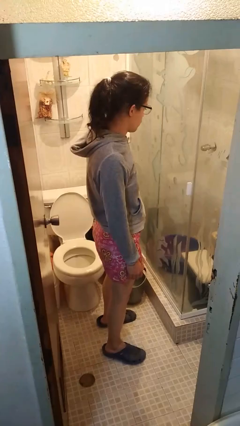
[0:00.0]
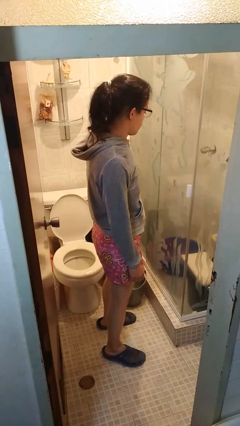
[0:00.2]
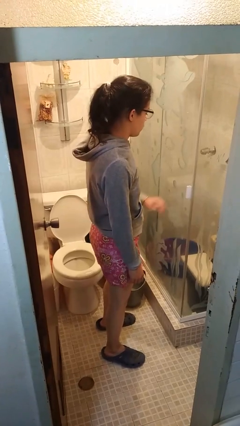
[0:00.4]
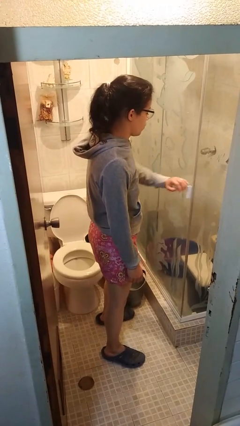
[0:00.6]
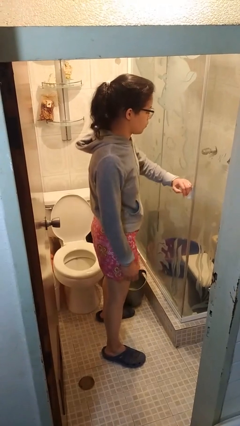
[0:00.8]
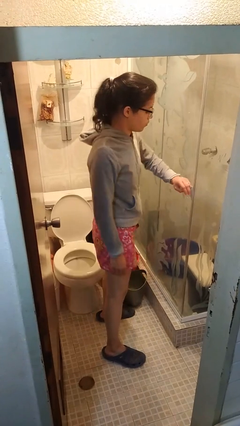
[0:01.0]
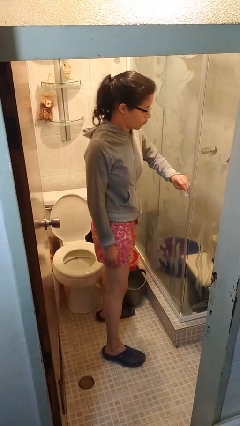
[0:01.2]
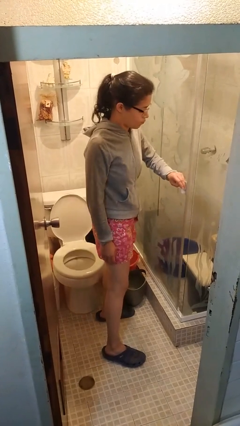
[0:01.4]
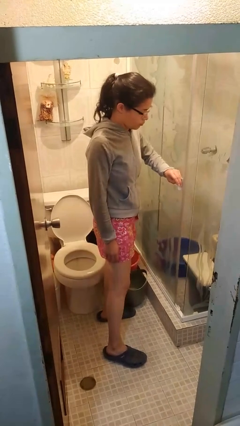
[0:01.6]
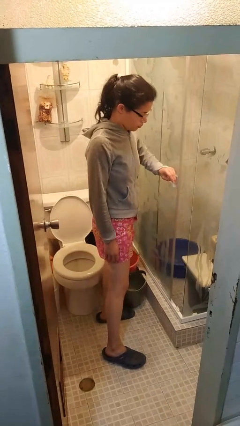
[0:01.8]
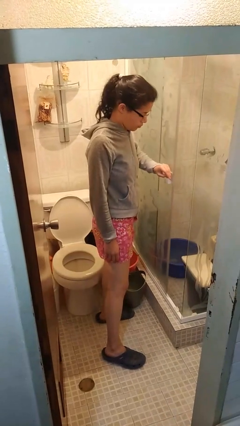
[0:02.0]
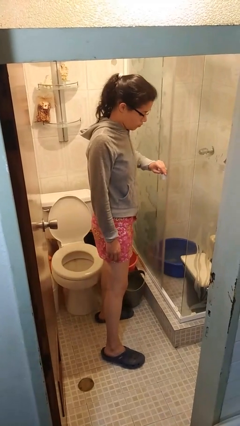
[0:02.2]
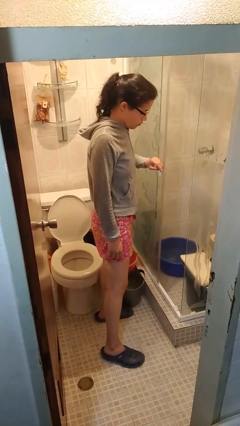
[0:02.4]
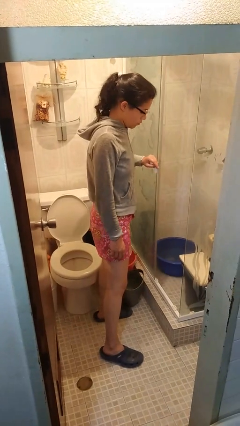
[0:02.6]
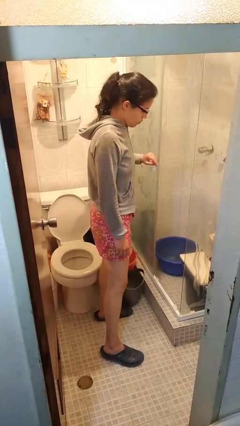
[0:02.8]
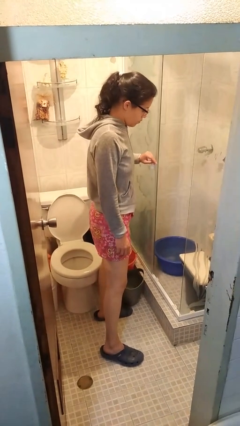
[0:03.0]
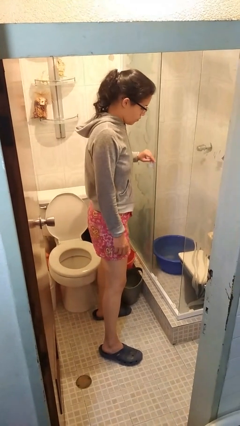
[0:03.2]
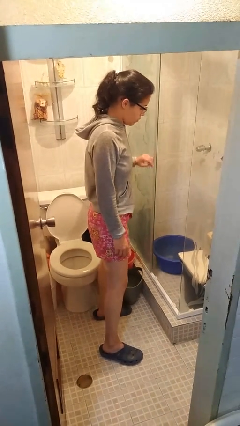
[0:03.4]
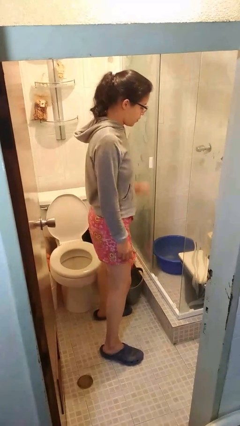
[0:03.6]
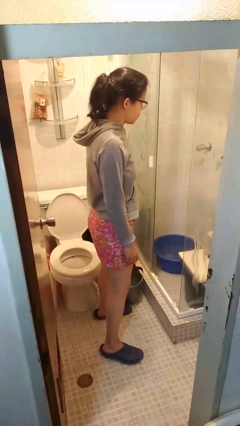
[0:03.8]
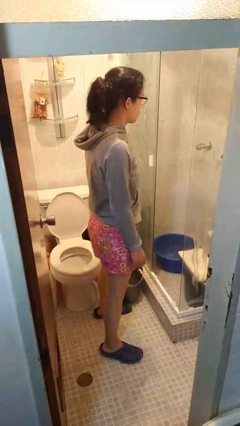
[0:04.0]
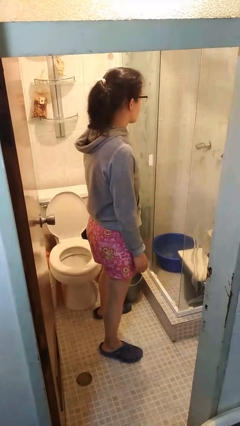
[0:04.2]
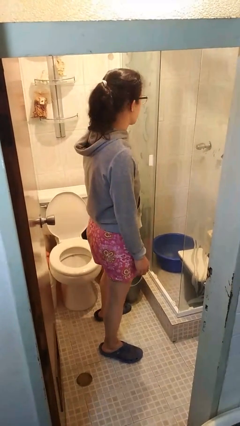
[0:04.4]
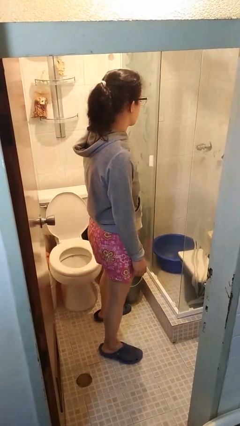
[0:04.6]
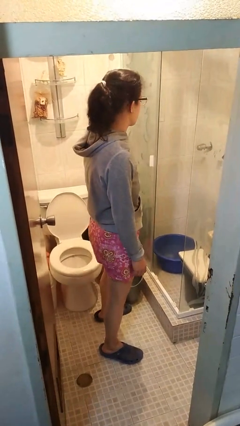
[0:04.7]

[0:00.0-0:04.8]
person opens sliding door

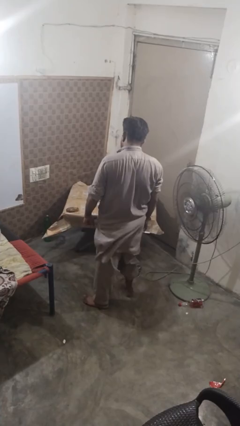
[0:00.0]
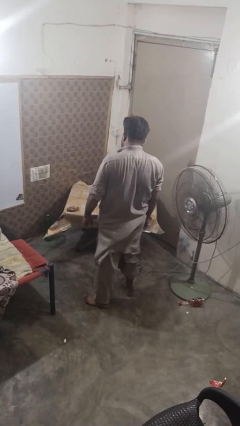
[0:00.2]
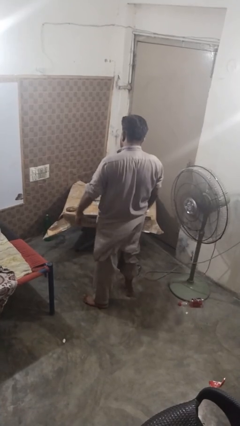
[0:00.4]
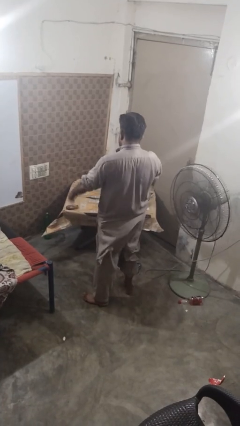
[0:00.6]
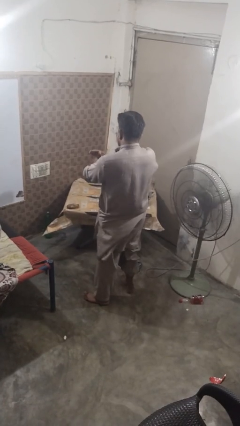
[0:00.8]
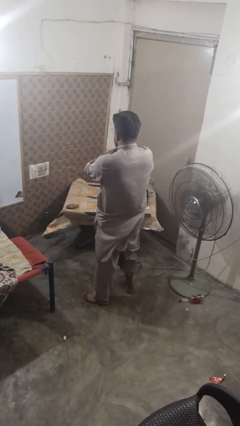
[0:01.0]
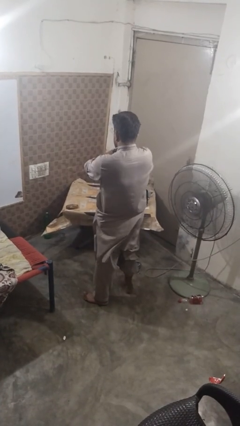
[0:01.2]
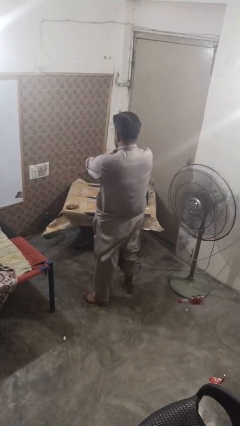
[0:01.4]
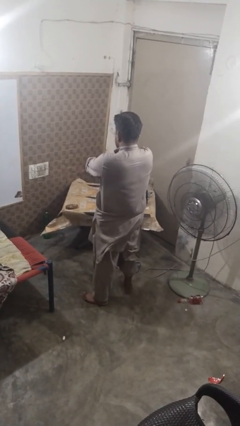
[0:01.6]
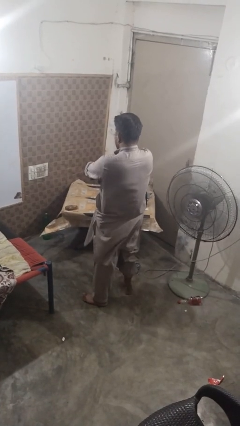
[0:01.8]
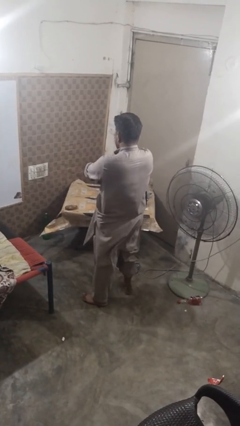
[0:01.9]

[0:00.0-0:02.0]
person crosses arms

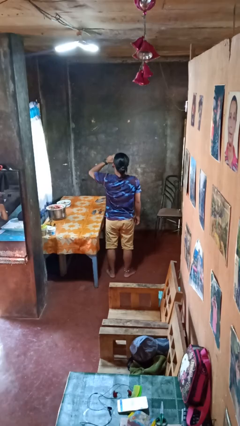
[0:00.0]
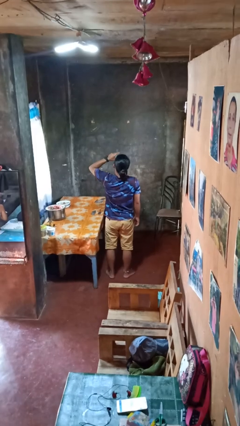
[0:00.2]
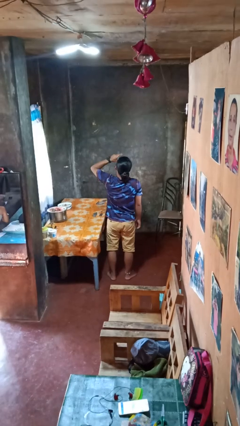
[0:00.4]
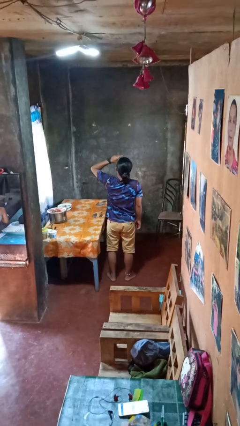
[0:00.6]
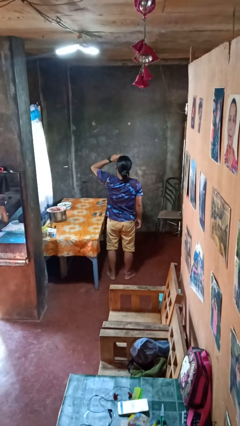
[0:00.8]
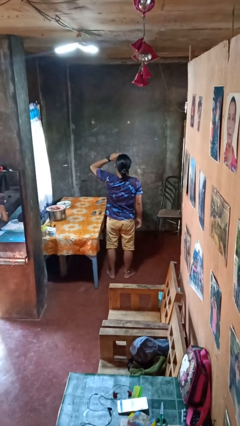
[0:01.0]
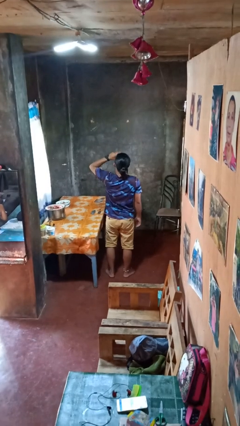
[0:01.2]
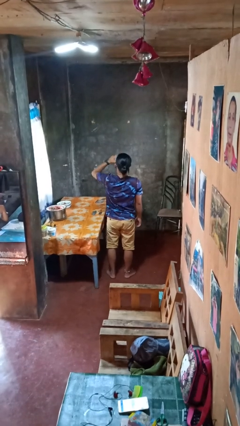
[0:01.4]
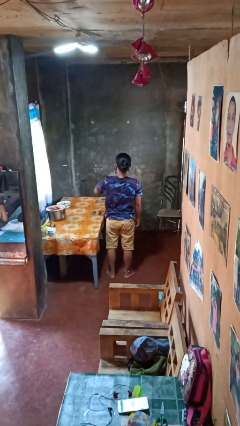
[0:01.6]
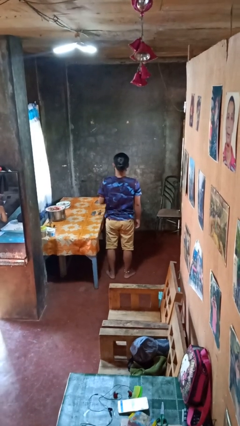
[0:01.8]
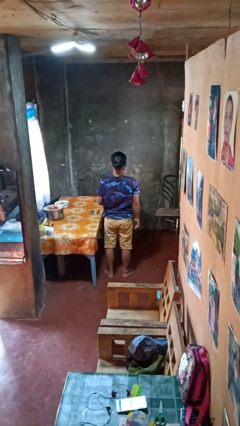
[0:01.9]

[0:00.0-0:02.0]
person drinks from beverage can

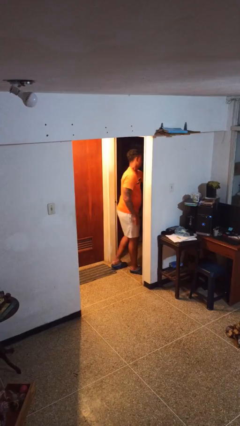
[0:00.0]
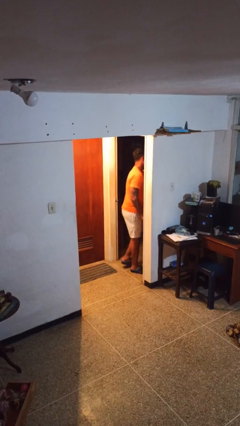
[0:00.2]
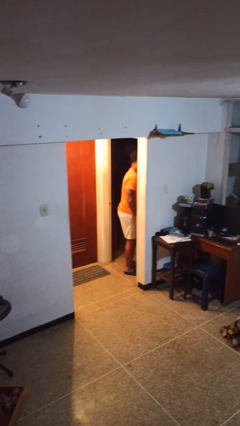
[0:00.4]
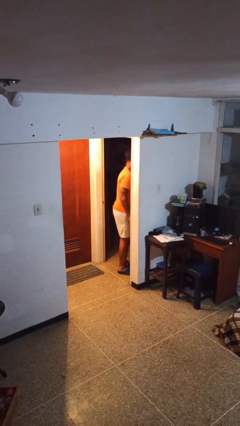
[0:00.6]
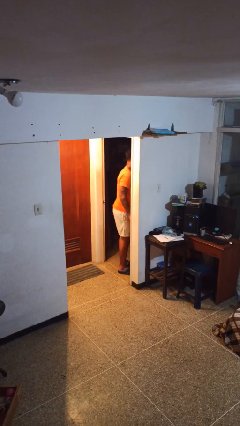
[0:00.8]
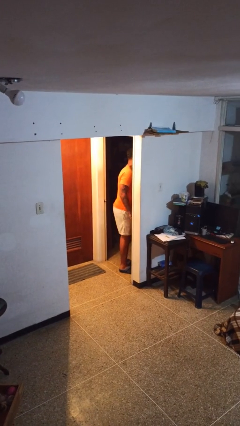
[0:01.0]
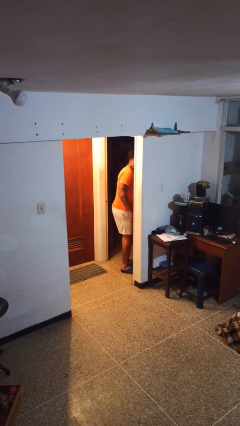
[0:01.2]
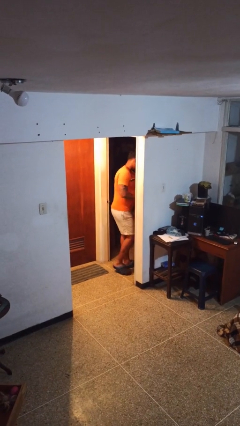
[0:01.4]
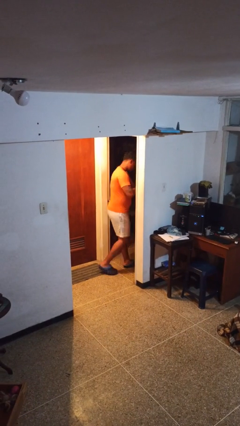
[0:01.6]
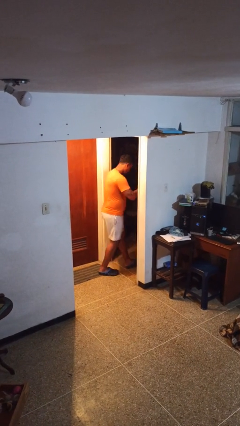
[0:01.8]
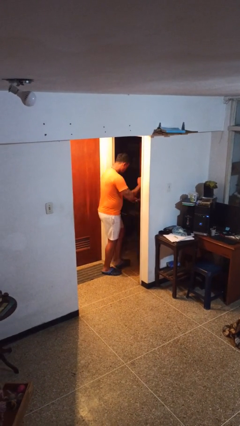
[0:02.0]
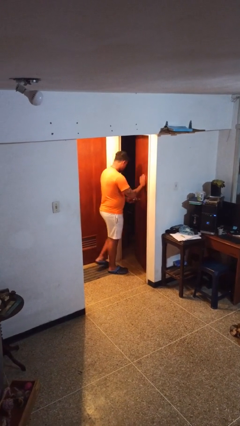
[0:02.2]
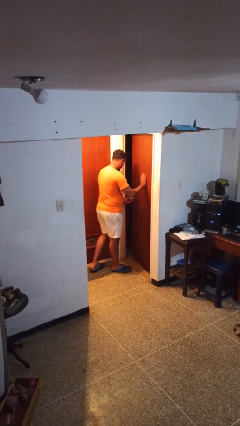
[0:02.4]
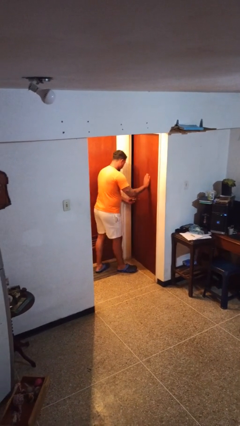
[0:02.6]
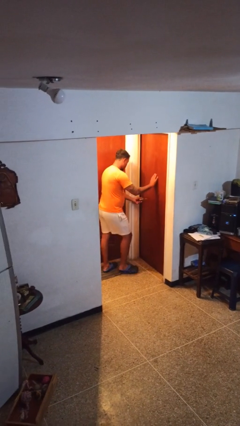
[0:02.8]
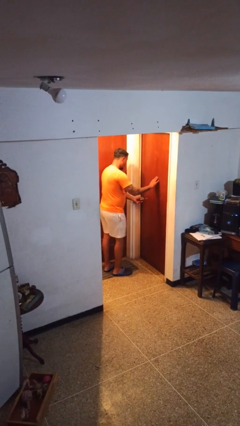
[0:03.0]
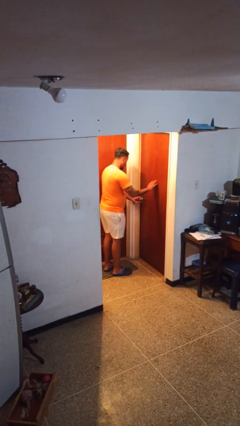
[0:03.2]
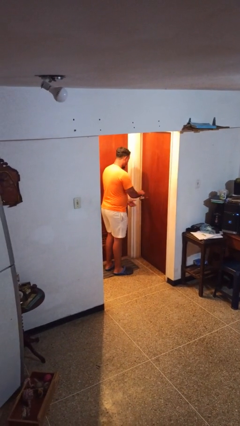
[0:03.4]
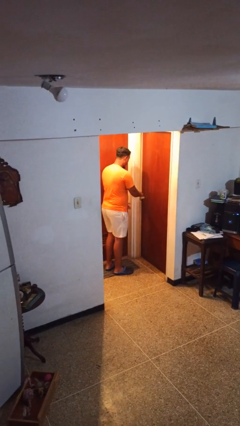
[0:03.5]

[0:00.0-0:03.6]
person closes facility door

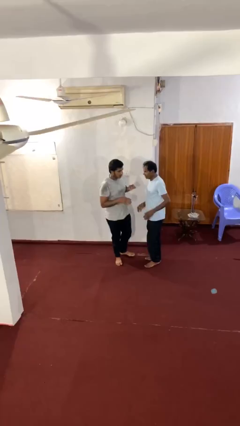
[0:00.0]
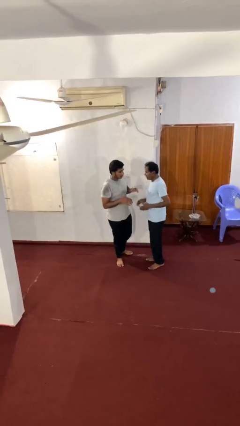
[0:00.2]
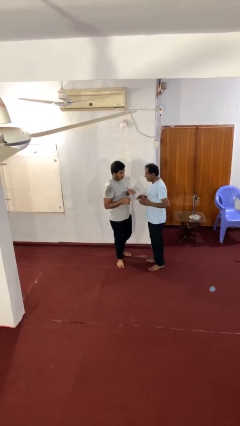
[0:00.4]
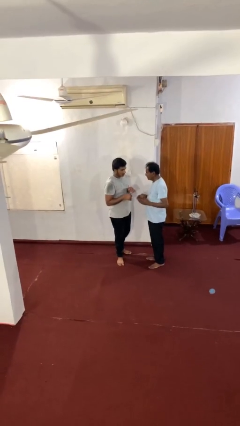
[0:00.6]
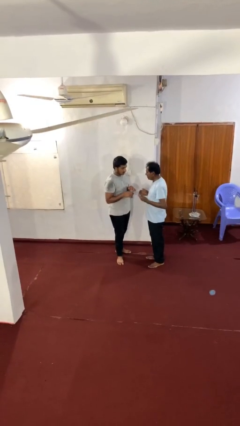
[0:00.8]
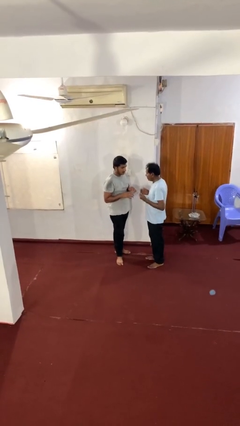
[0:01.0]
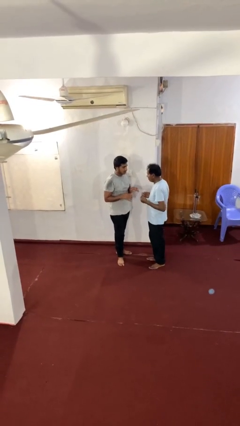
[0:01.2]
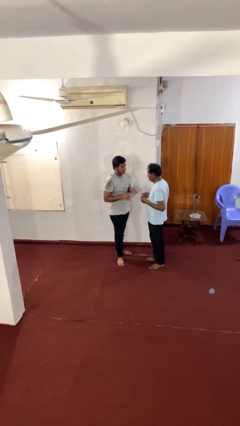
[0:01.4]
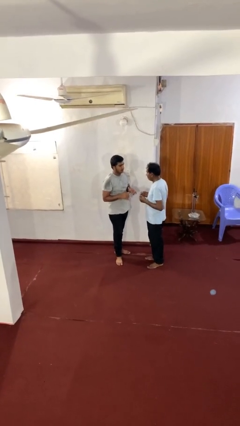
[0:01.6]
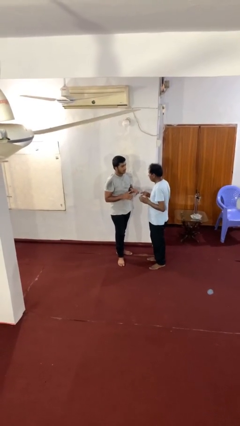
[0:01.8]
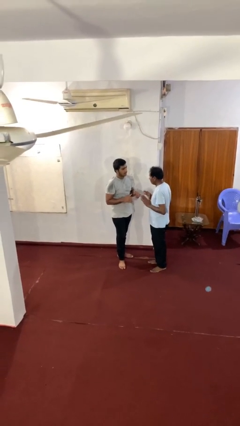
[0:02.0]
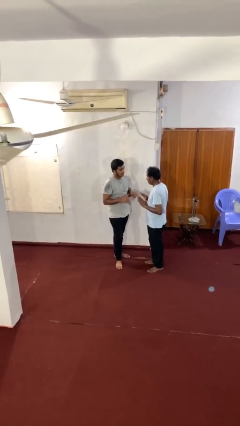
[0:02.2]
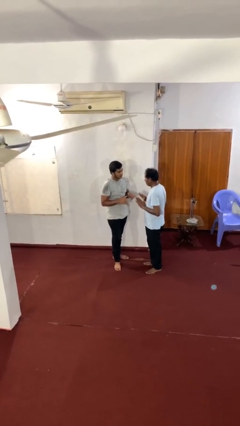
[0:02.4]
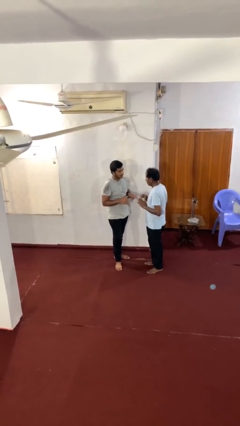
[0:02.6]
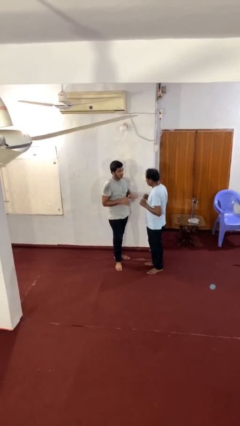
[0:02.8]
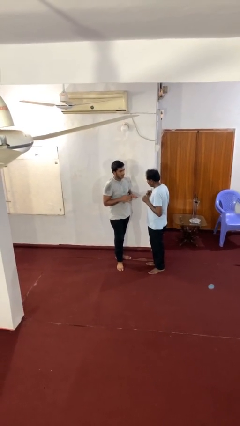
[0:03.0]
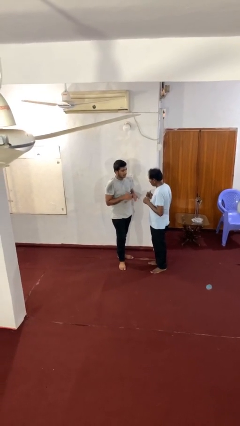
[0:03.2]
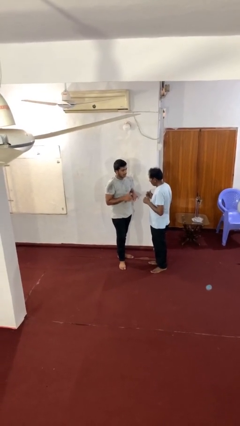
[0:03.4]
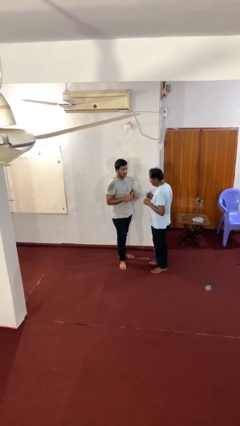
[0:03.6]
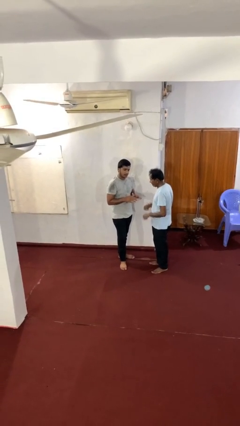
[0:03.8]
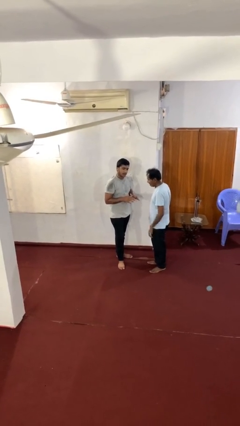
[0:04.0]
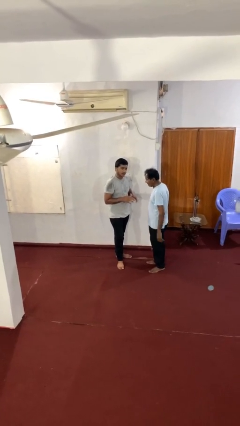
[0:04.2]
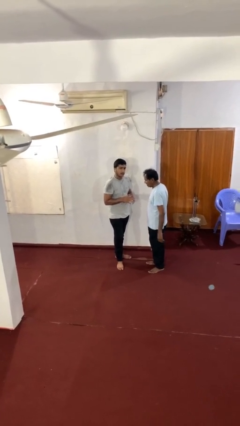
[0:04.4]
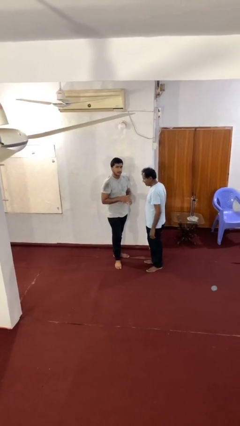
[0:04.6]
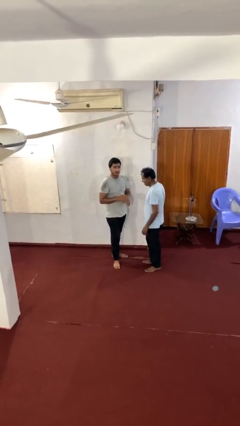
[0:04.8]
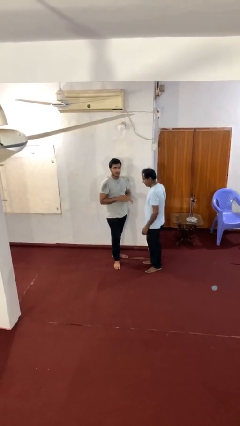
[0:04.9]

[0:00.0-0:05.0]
person talks to person

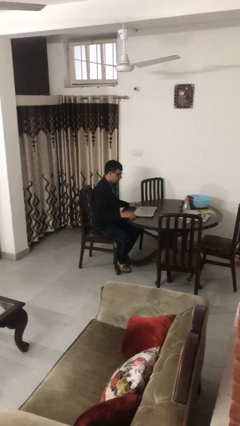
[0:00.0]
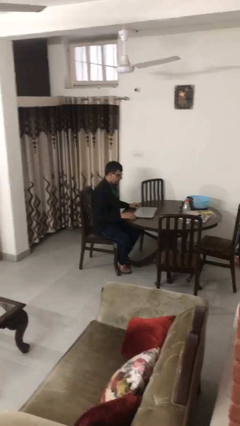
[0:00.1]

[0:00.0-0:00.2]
person interacts with laptop
